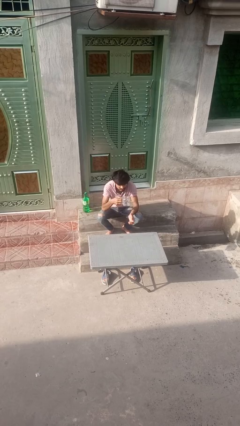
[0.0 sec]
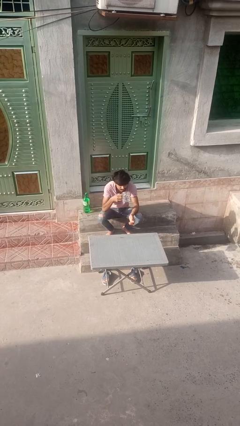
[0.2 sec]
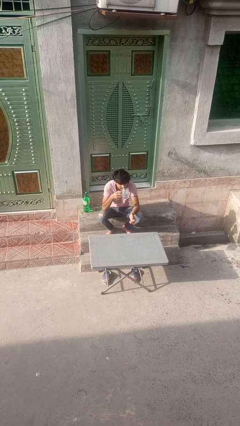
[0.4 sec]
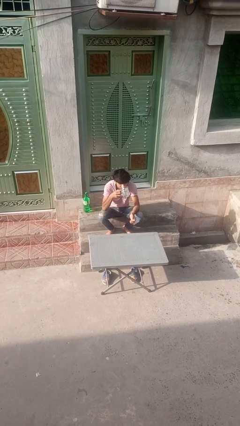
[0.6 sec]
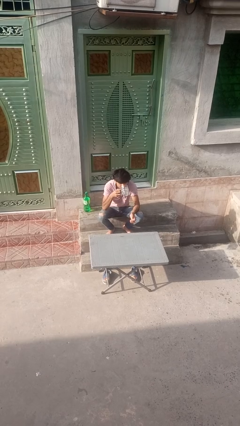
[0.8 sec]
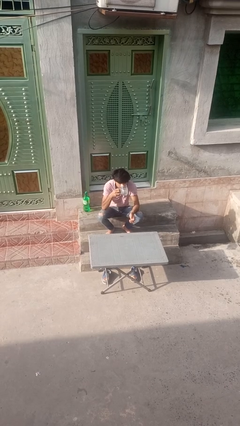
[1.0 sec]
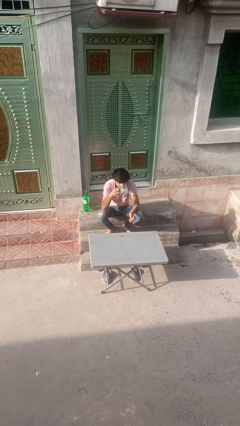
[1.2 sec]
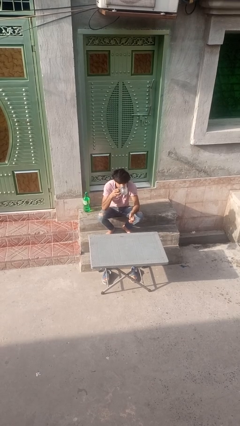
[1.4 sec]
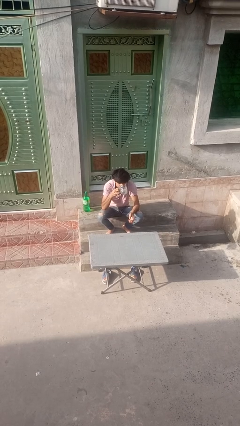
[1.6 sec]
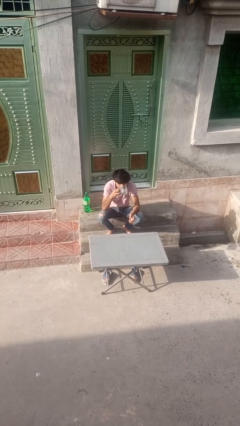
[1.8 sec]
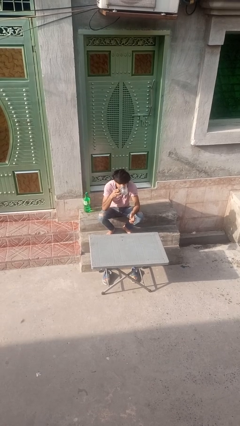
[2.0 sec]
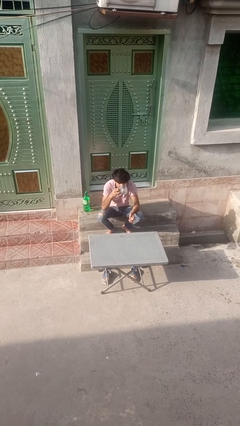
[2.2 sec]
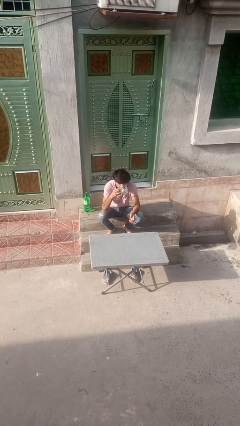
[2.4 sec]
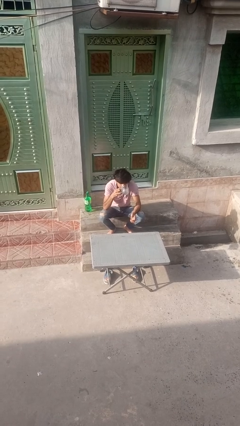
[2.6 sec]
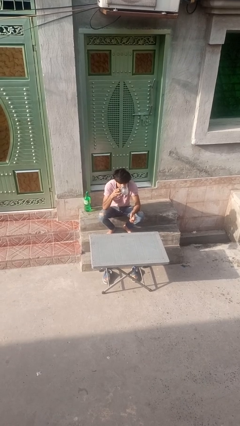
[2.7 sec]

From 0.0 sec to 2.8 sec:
person drinks from mug

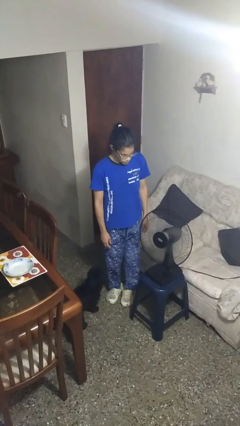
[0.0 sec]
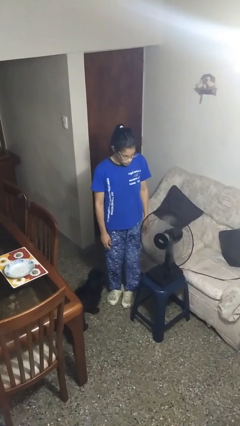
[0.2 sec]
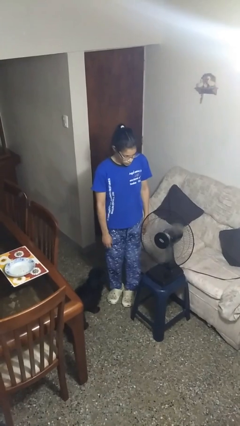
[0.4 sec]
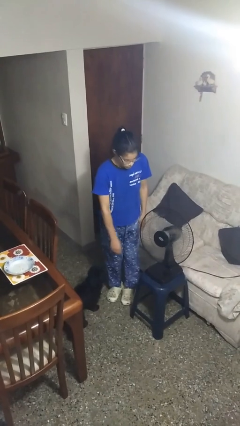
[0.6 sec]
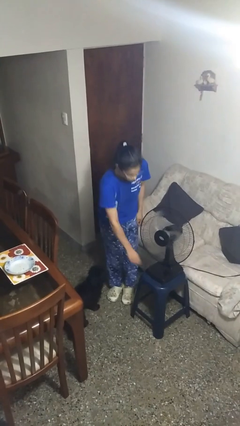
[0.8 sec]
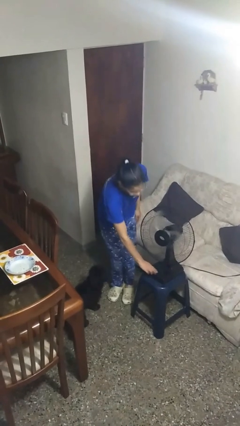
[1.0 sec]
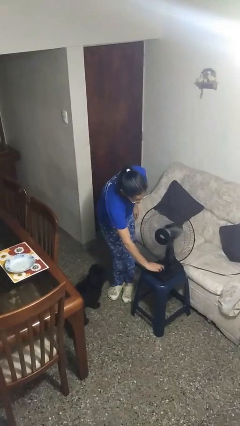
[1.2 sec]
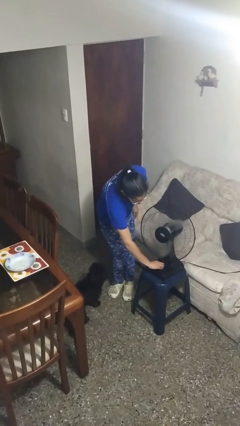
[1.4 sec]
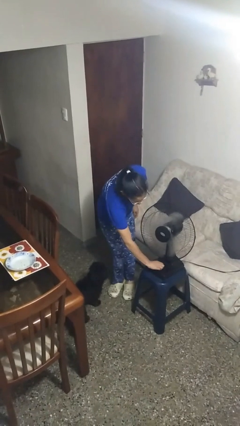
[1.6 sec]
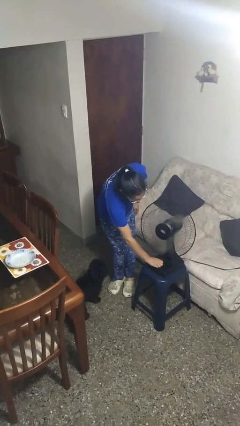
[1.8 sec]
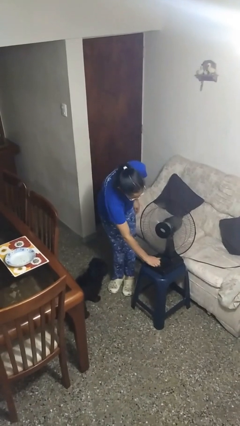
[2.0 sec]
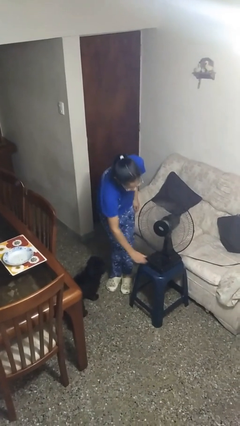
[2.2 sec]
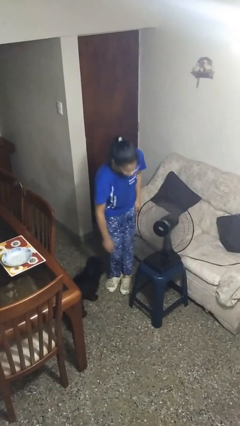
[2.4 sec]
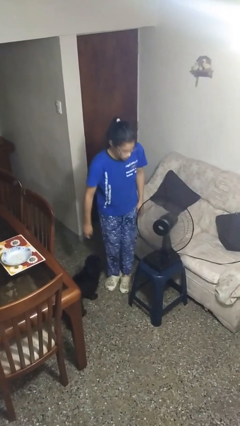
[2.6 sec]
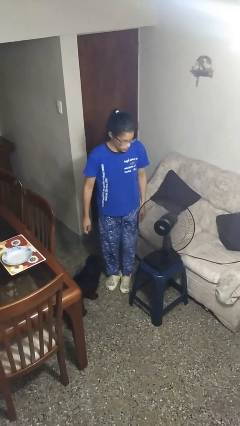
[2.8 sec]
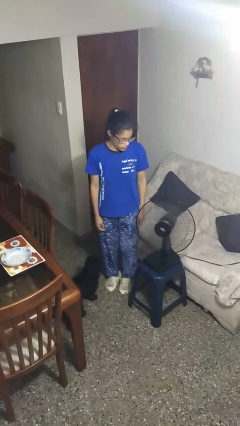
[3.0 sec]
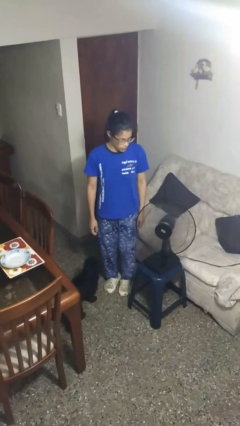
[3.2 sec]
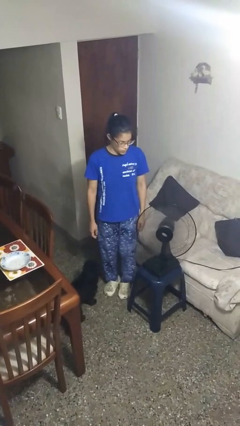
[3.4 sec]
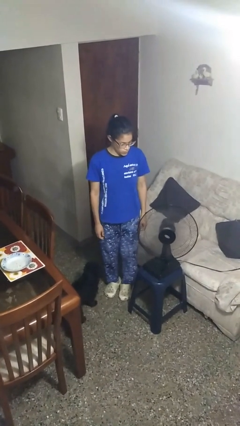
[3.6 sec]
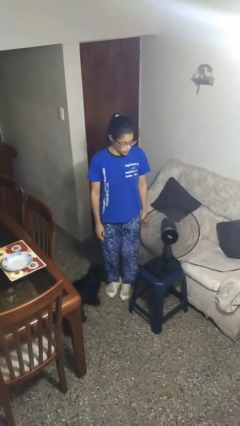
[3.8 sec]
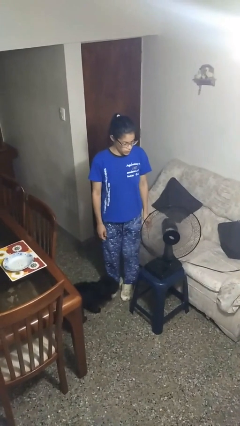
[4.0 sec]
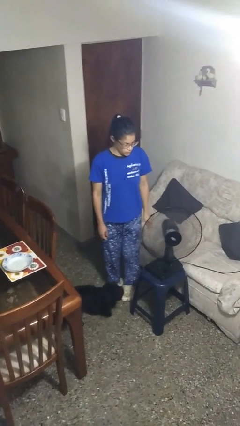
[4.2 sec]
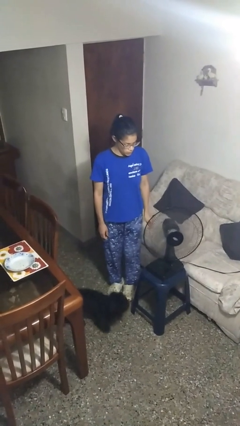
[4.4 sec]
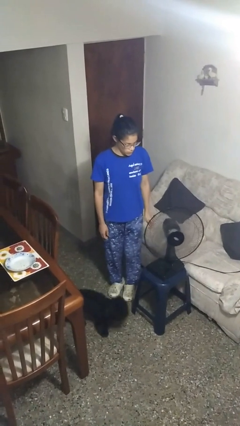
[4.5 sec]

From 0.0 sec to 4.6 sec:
person turns on fan

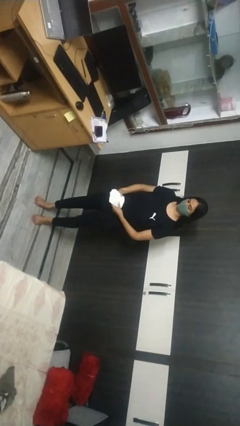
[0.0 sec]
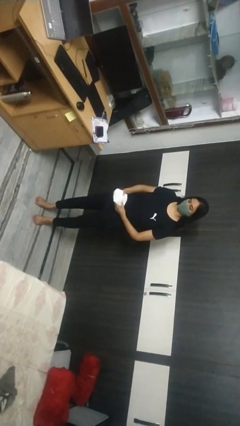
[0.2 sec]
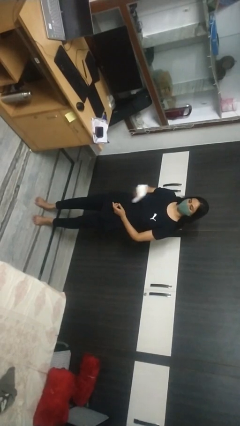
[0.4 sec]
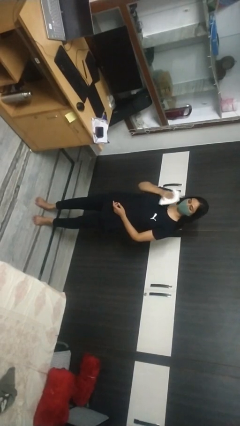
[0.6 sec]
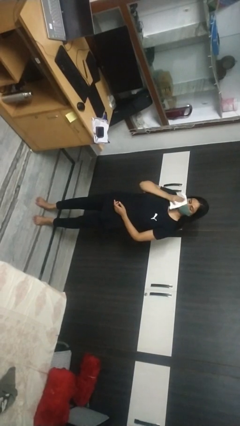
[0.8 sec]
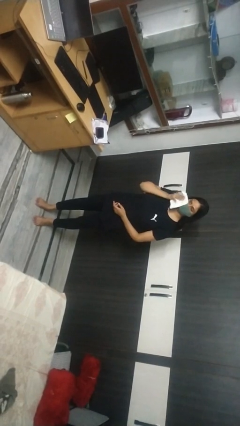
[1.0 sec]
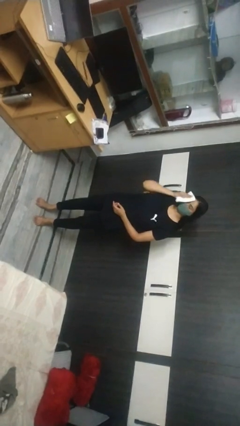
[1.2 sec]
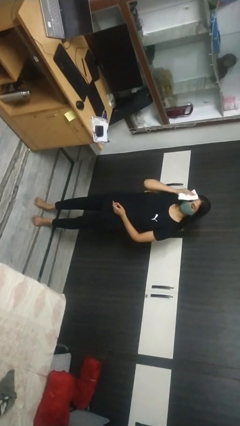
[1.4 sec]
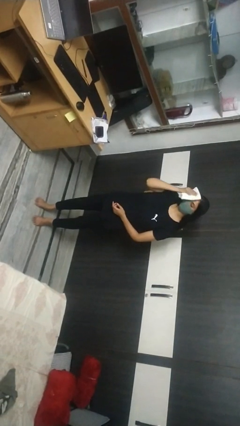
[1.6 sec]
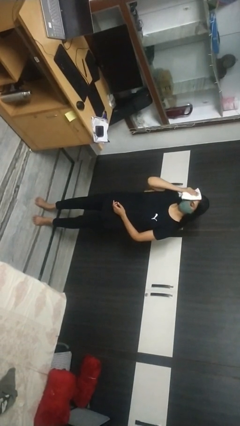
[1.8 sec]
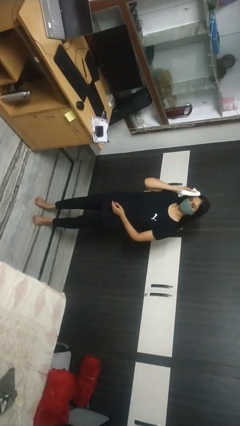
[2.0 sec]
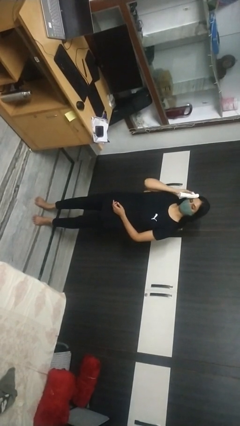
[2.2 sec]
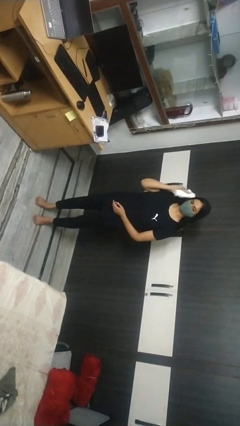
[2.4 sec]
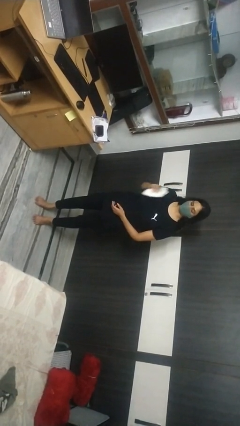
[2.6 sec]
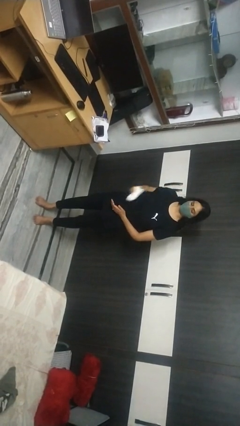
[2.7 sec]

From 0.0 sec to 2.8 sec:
person wipes mouth with napkin

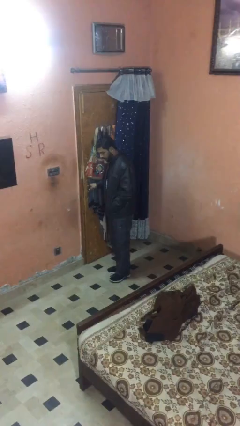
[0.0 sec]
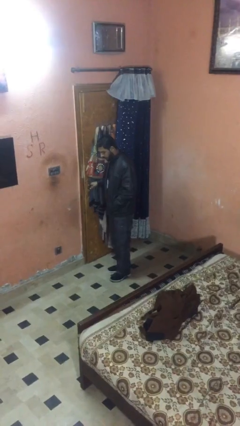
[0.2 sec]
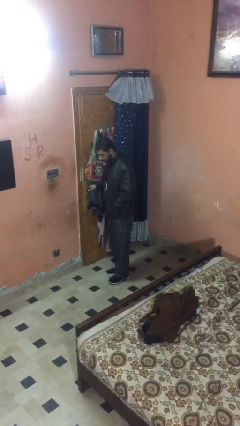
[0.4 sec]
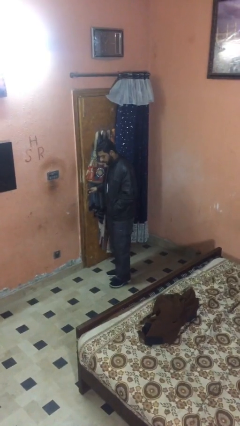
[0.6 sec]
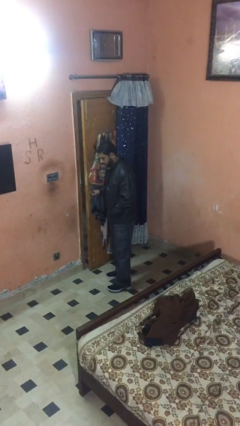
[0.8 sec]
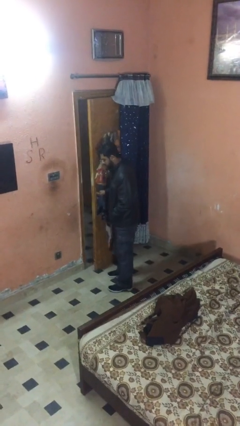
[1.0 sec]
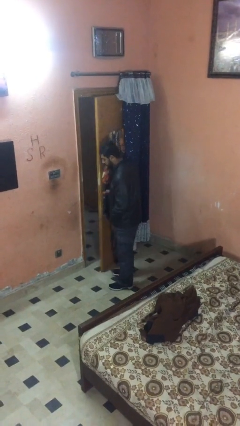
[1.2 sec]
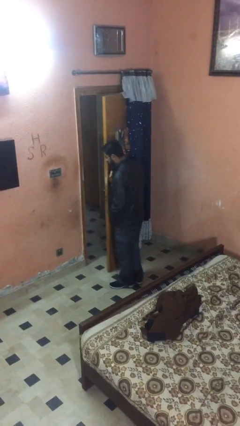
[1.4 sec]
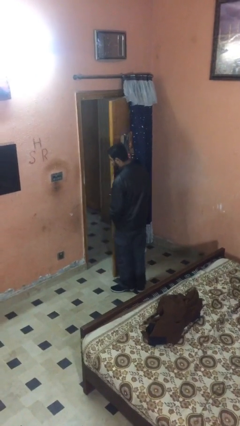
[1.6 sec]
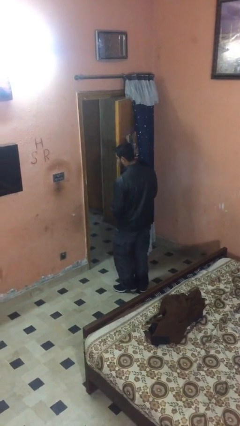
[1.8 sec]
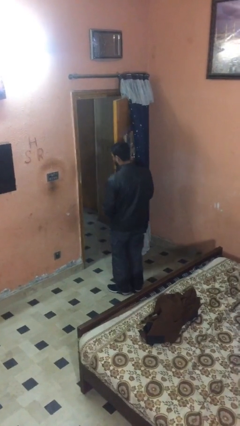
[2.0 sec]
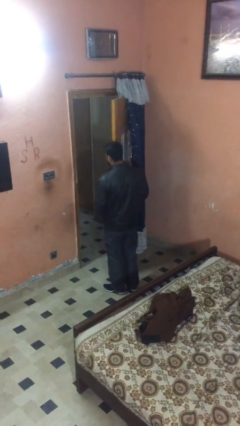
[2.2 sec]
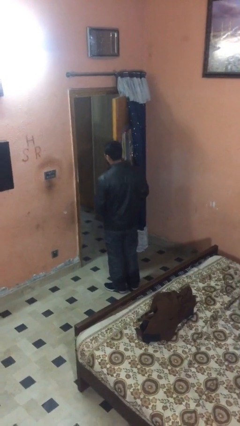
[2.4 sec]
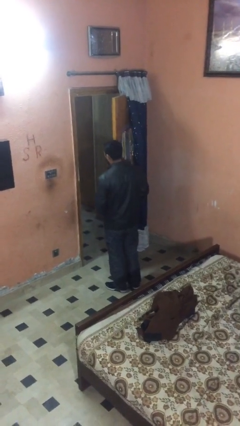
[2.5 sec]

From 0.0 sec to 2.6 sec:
person opens facility door

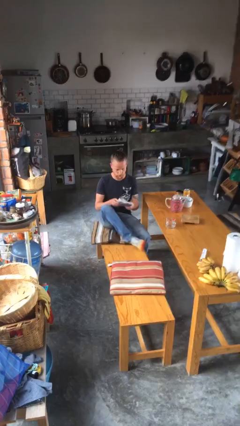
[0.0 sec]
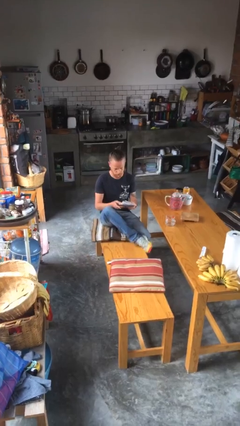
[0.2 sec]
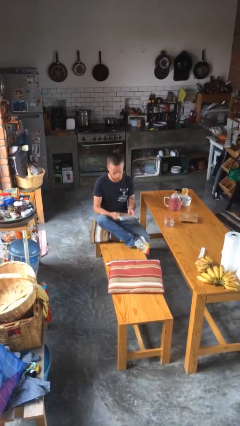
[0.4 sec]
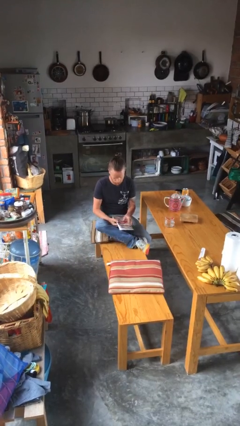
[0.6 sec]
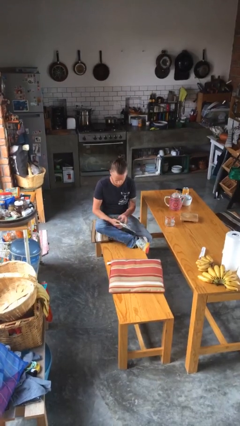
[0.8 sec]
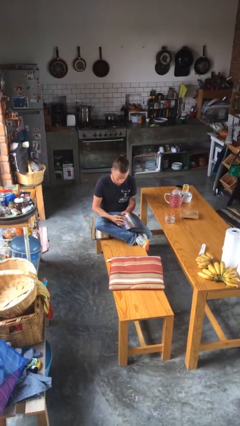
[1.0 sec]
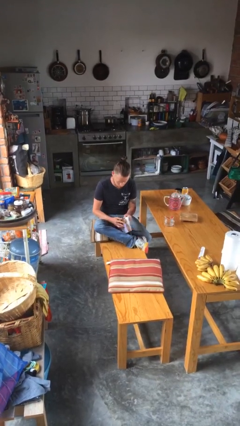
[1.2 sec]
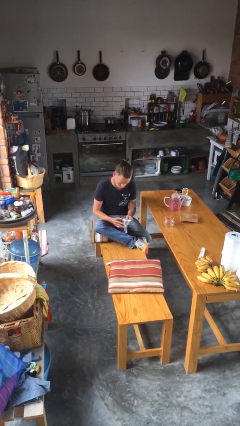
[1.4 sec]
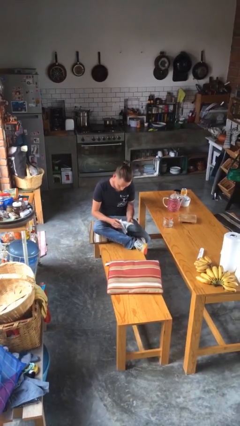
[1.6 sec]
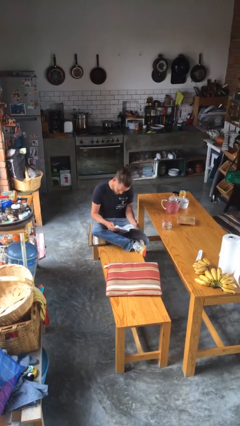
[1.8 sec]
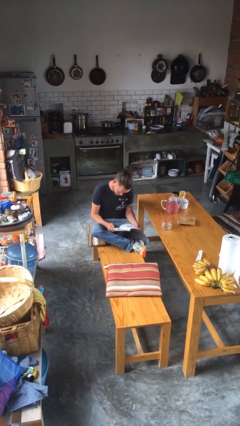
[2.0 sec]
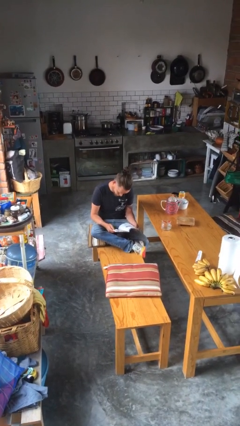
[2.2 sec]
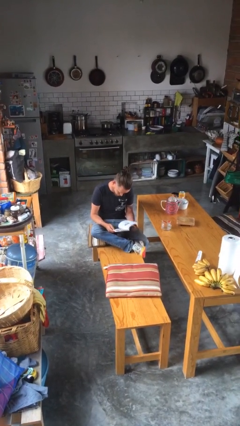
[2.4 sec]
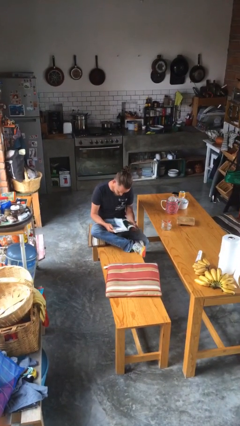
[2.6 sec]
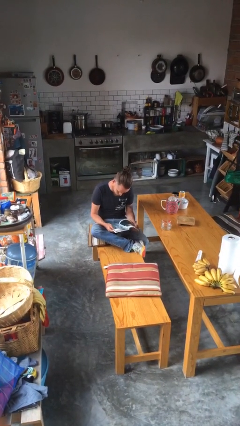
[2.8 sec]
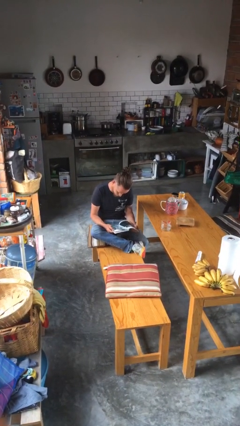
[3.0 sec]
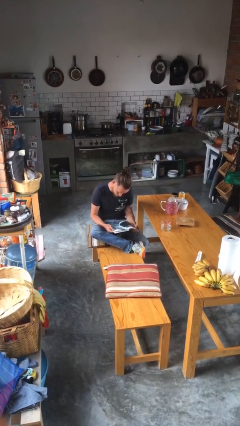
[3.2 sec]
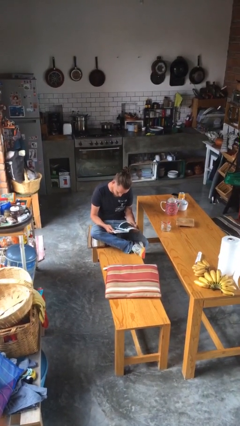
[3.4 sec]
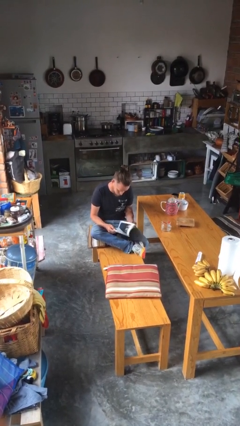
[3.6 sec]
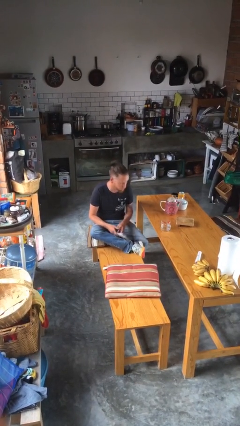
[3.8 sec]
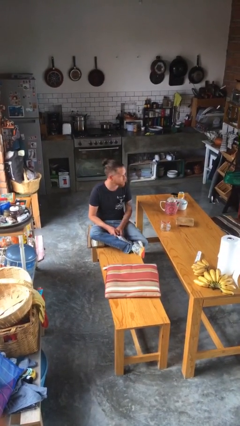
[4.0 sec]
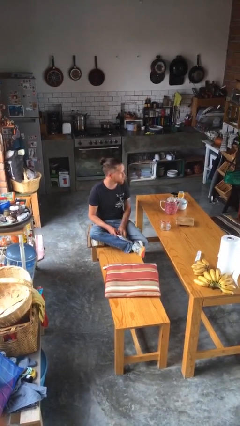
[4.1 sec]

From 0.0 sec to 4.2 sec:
person reads magazine

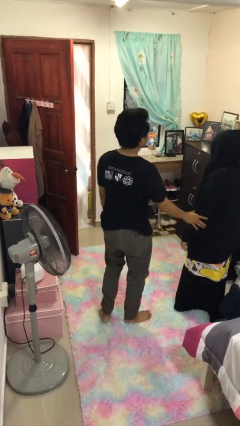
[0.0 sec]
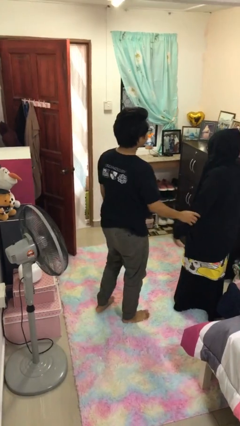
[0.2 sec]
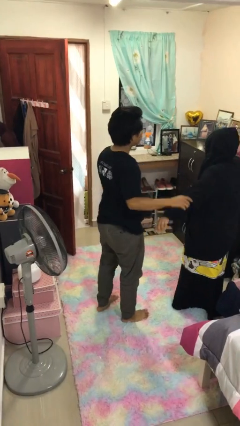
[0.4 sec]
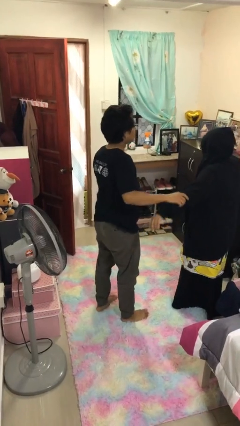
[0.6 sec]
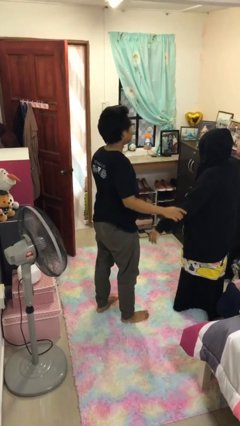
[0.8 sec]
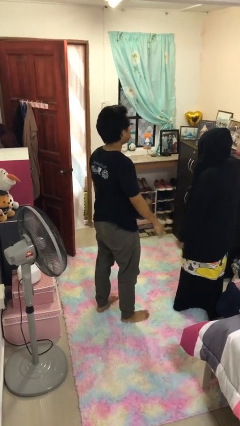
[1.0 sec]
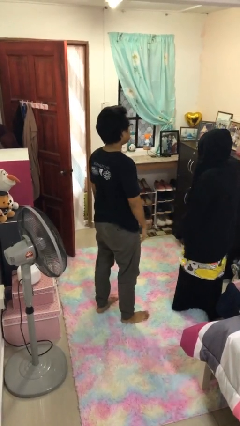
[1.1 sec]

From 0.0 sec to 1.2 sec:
person grabs person by forearm
